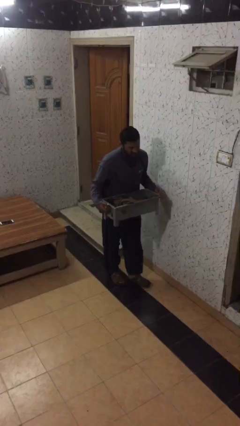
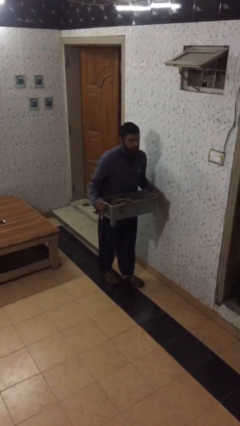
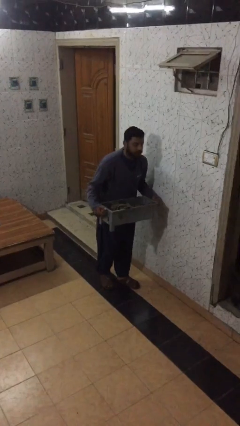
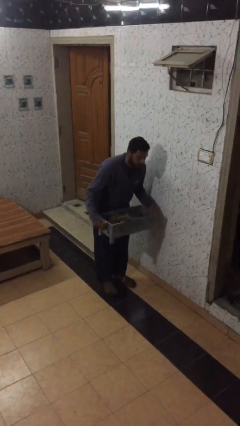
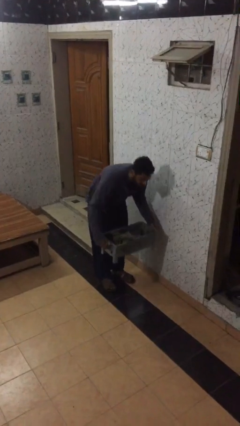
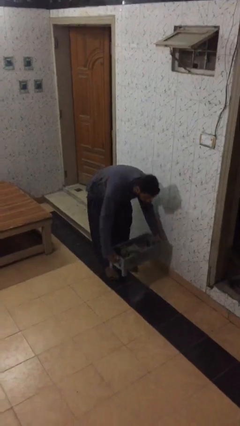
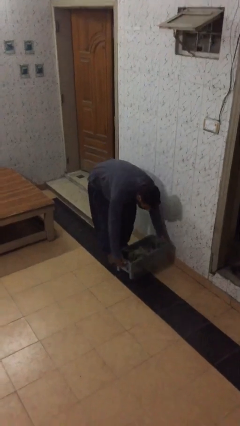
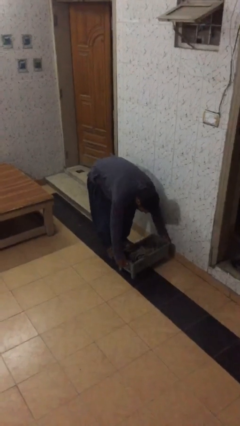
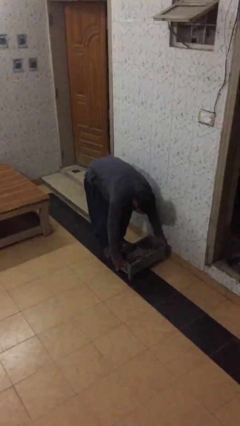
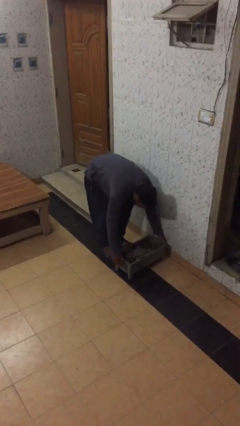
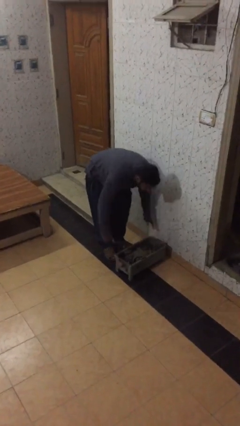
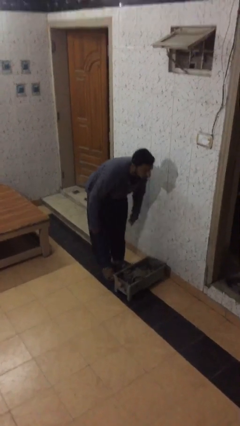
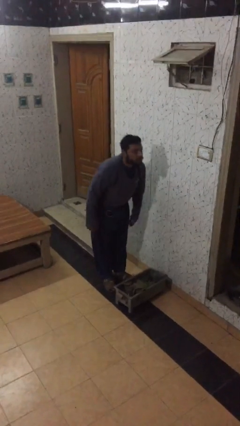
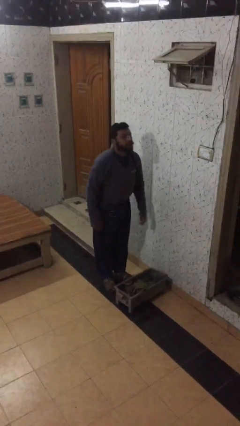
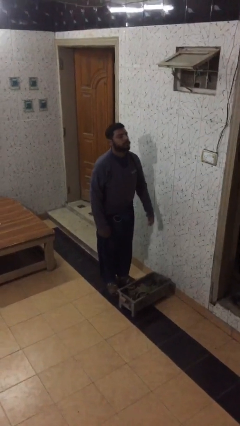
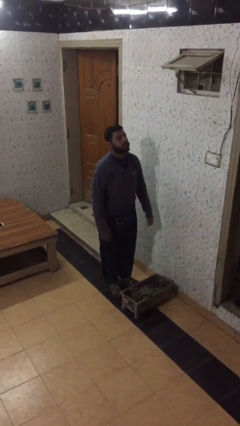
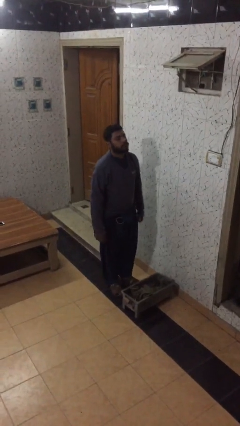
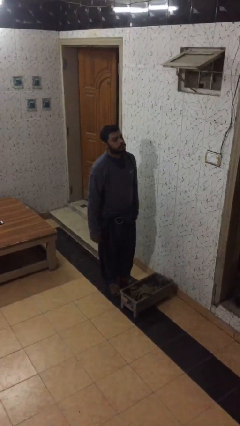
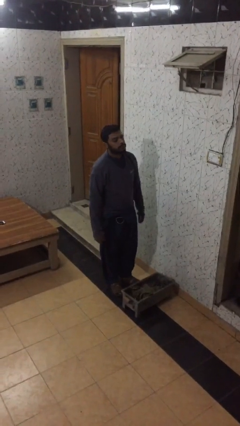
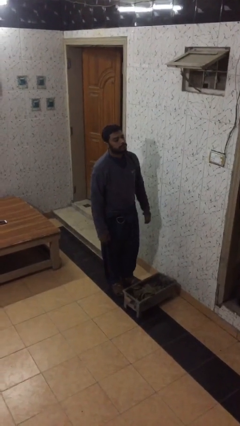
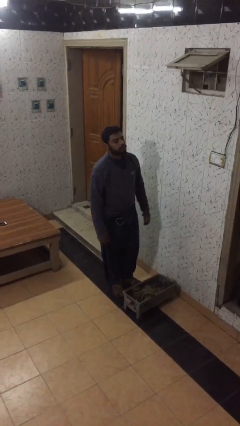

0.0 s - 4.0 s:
person puts down object on floor

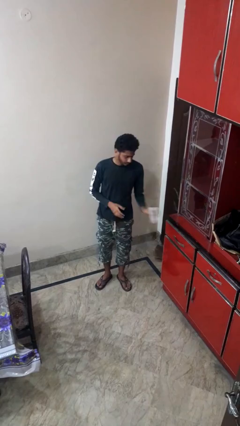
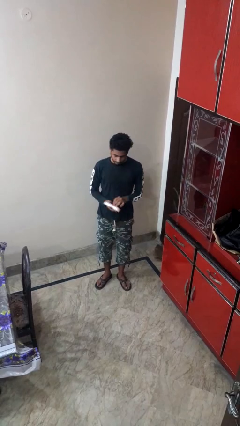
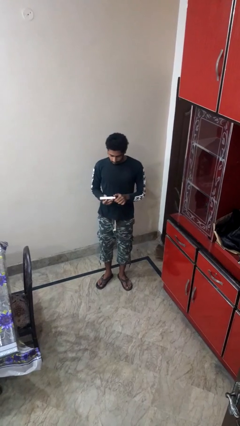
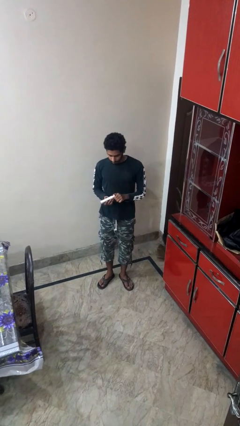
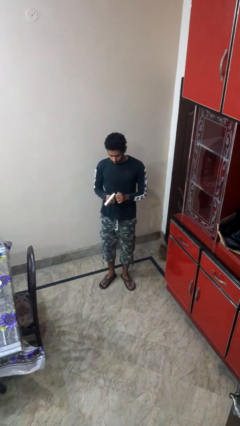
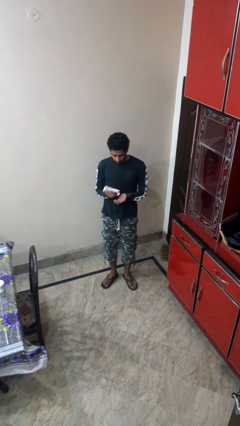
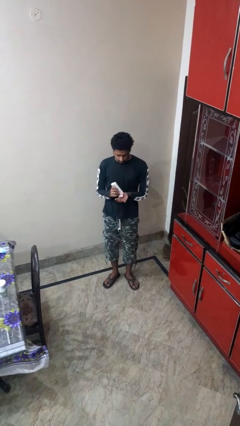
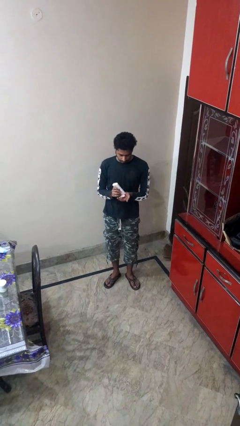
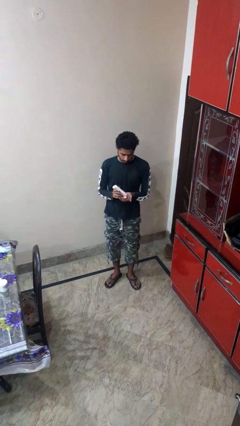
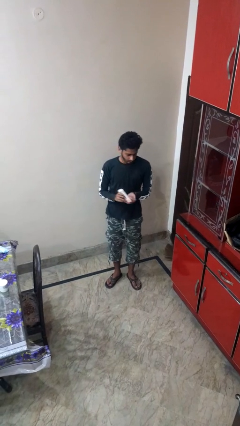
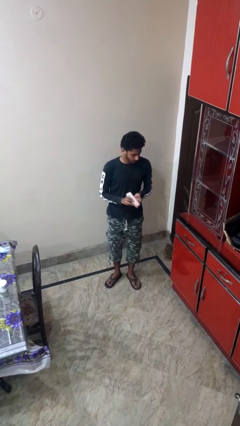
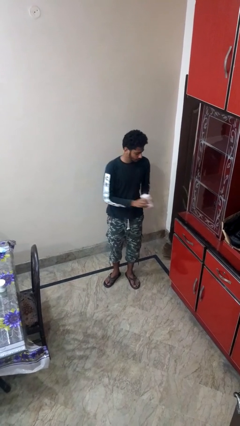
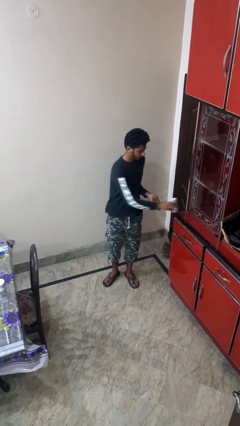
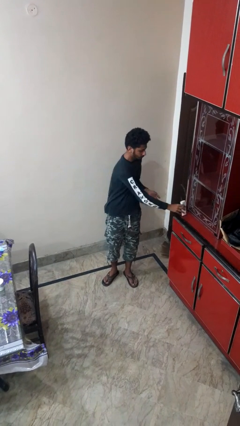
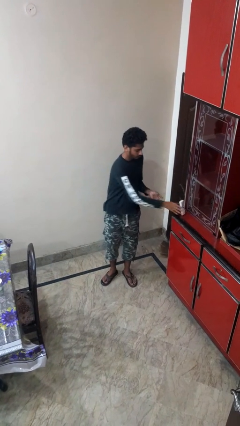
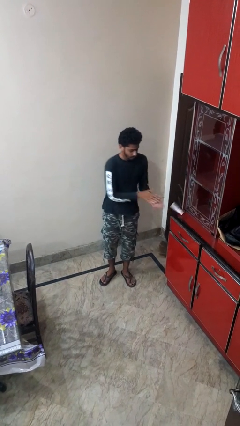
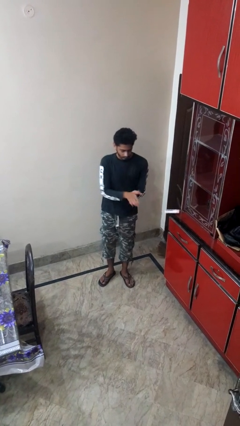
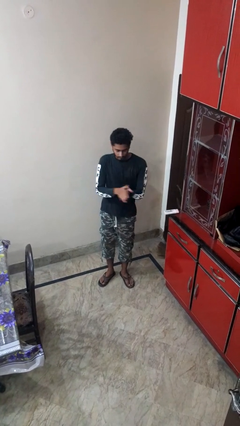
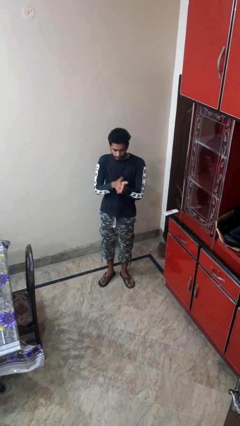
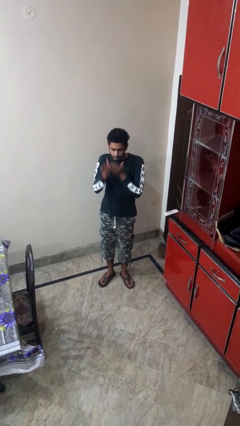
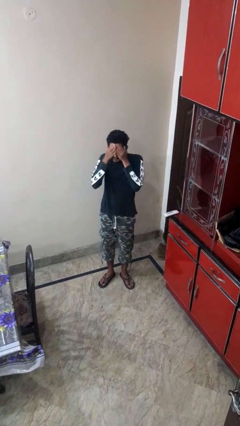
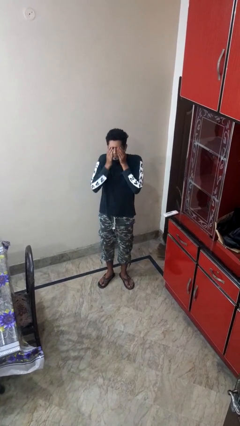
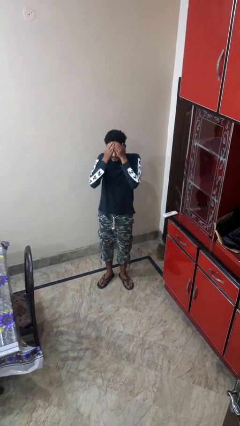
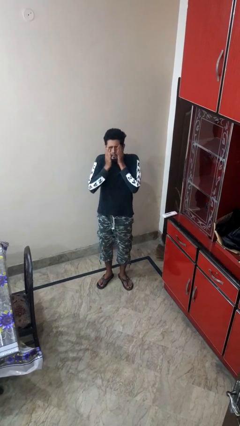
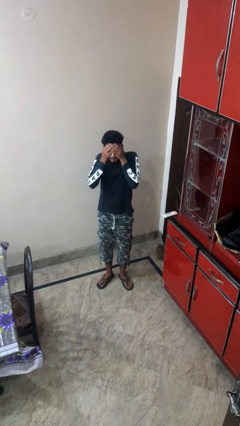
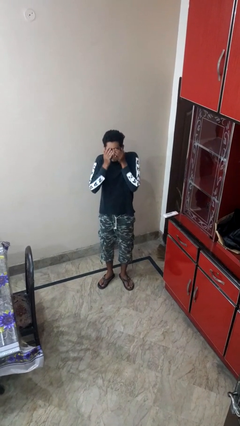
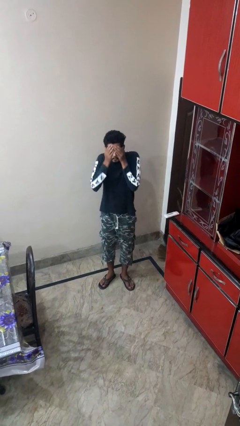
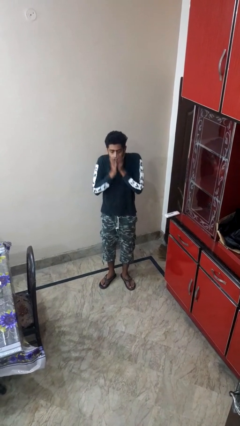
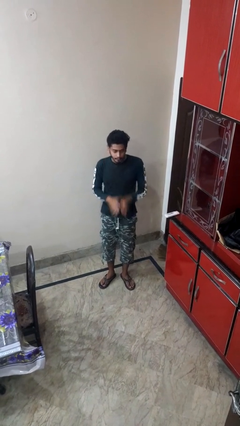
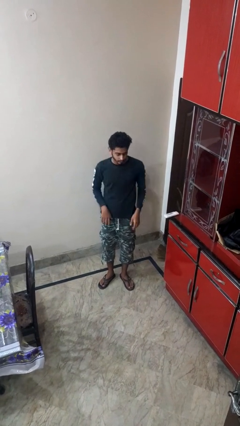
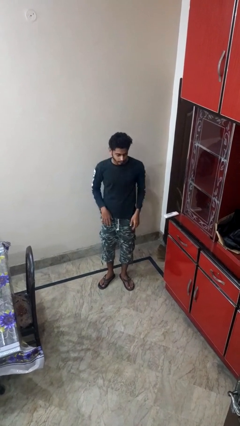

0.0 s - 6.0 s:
person applies facial moisturizer

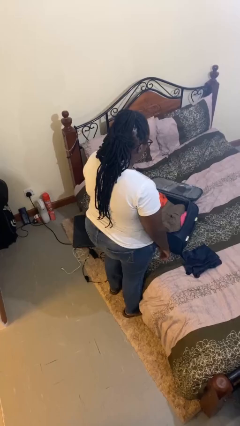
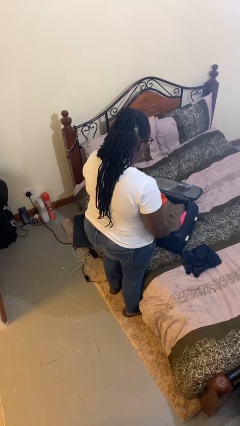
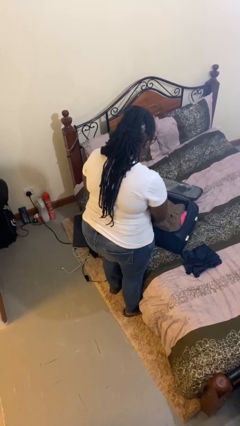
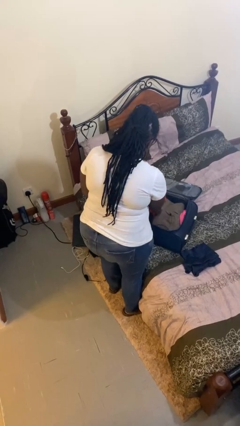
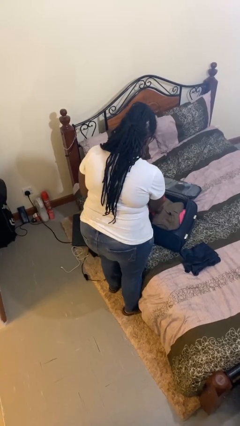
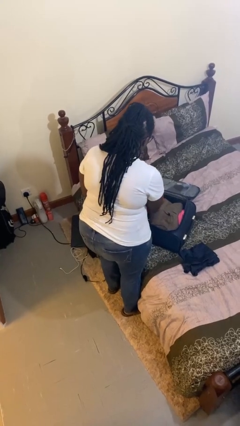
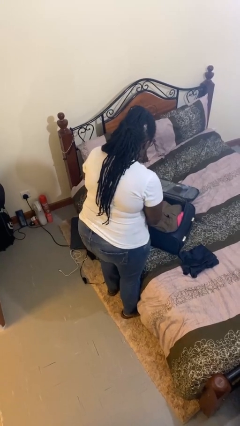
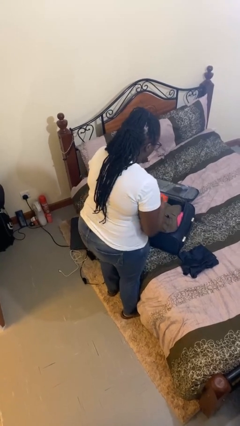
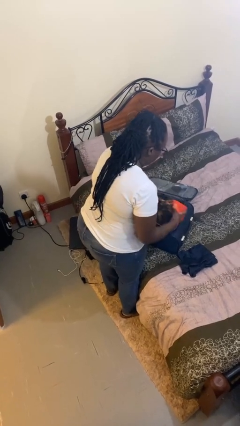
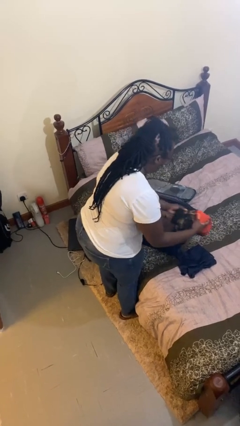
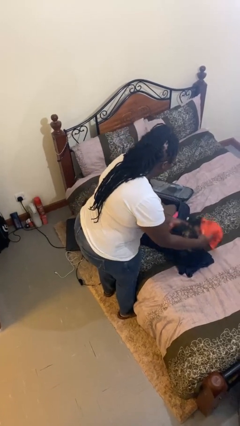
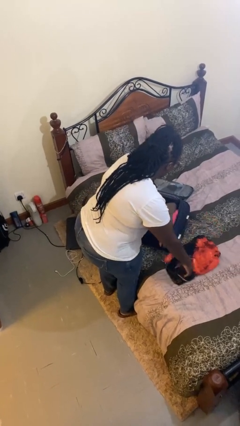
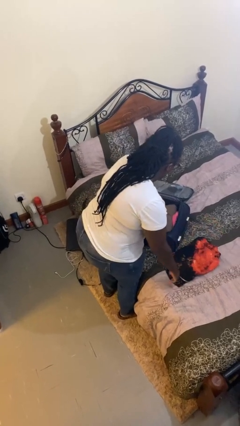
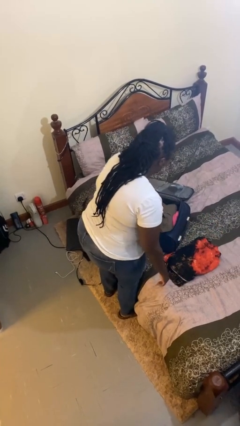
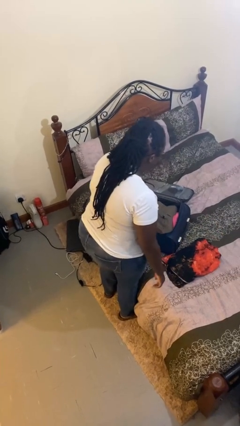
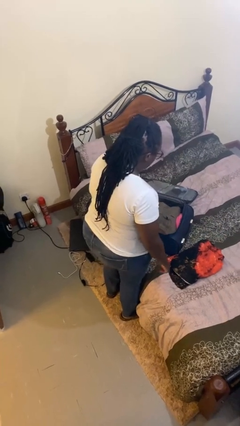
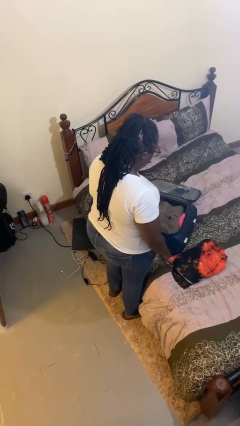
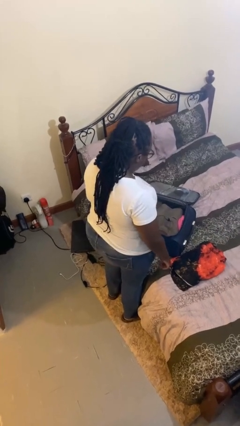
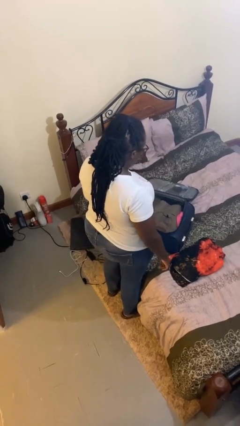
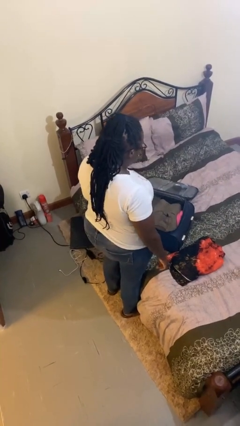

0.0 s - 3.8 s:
person unloads clothes from suitcase

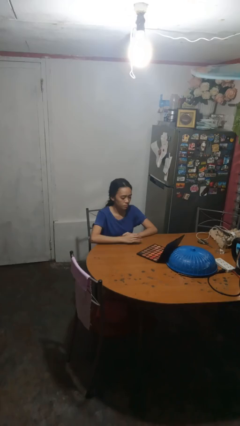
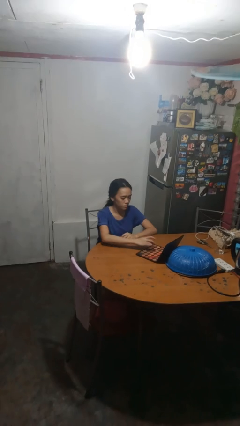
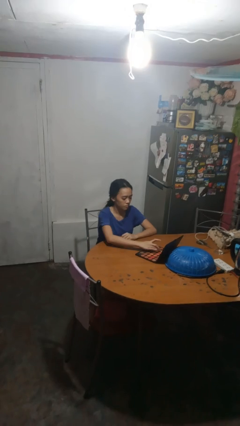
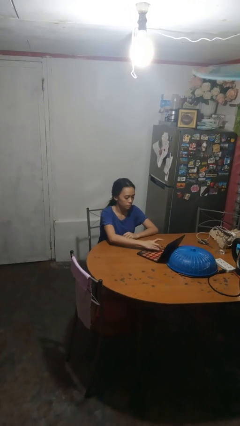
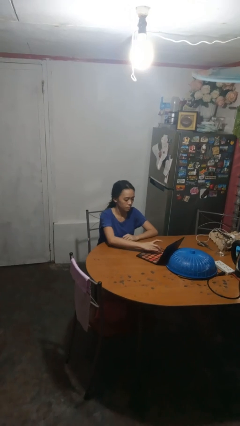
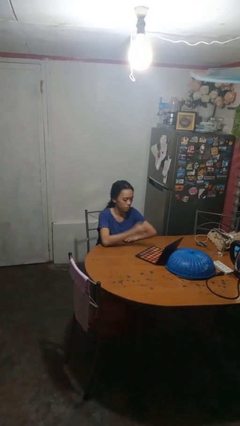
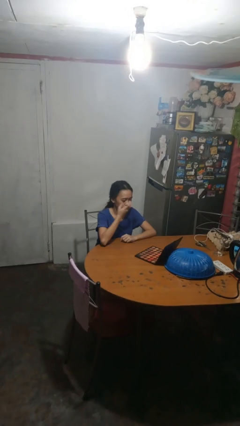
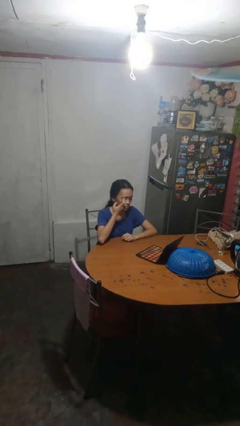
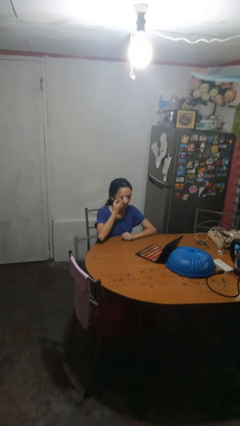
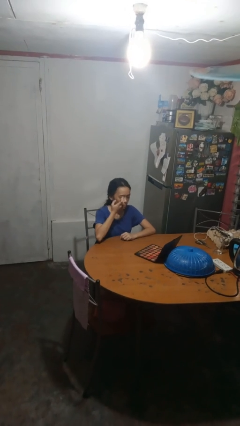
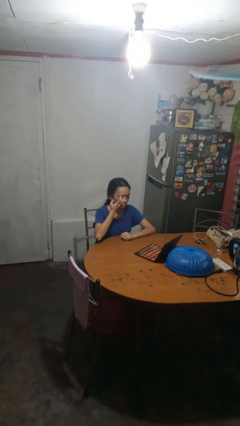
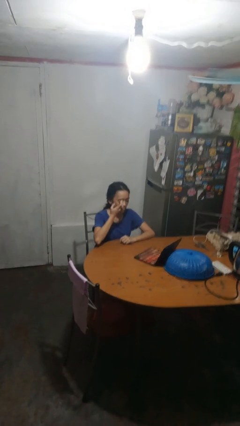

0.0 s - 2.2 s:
person applies eye makeup

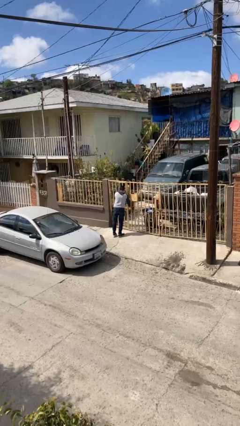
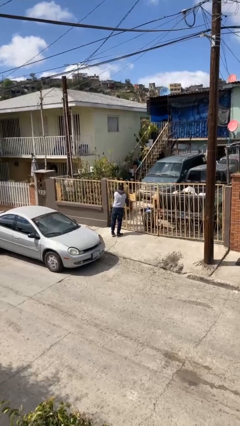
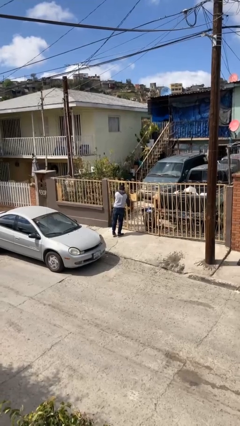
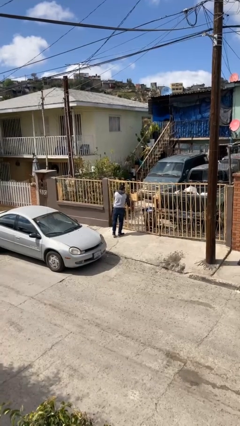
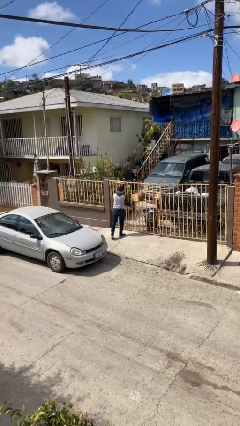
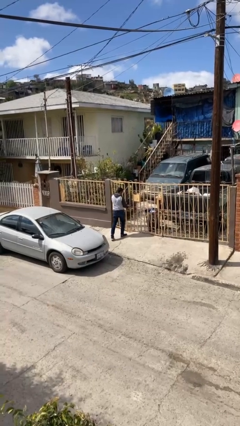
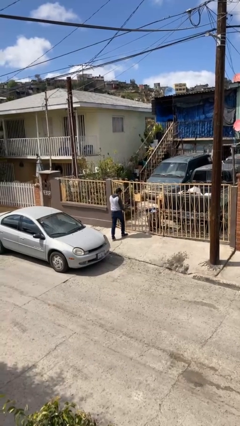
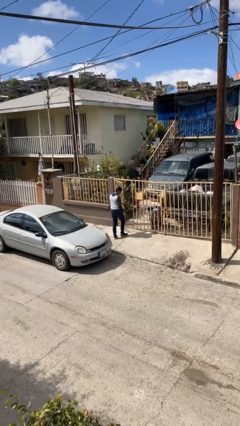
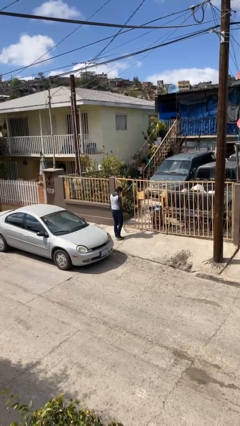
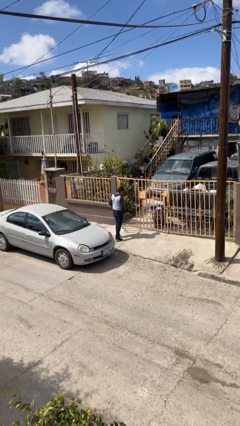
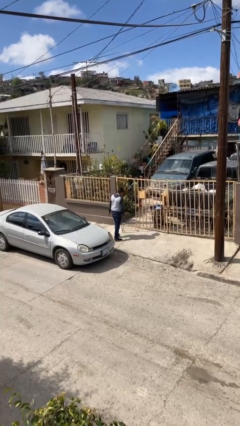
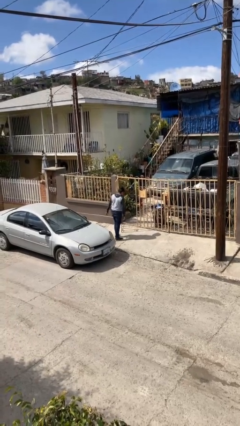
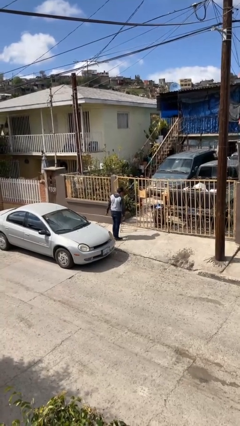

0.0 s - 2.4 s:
person opens facility door
